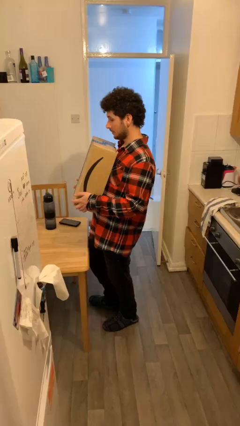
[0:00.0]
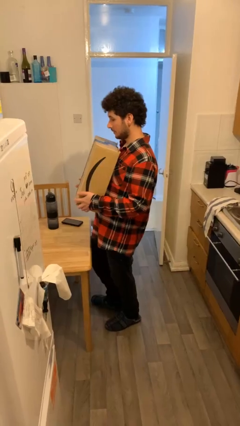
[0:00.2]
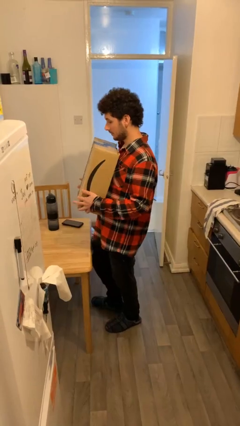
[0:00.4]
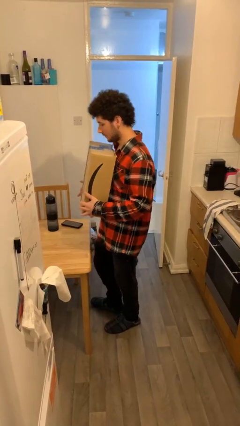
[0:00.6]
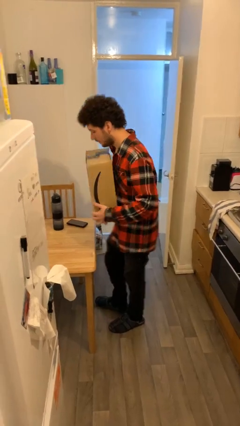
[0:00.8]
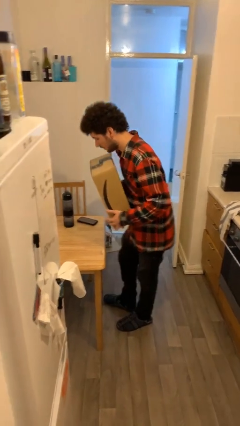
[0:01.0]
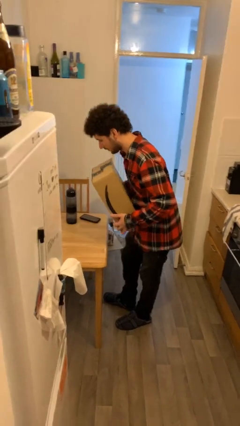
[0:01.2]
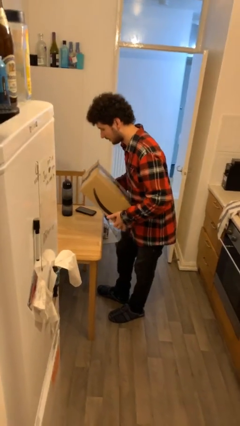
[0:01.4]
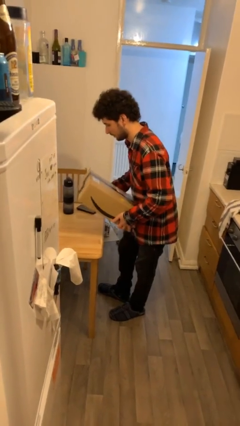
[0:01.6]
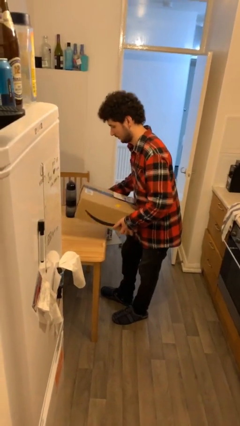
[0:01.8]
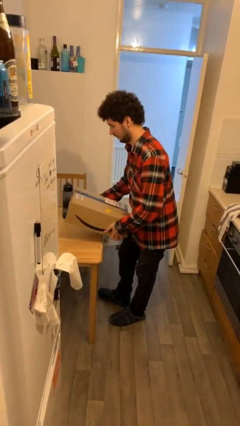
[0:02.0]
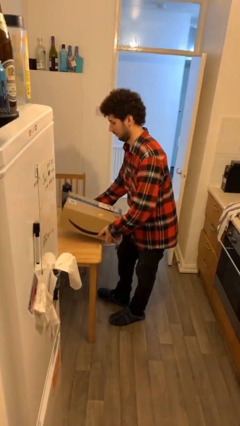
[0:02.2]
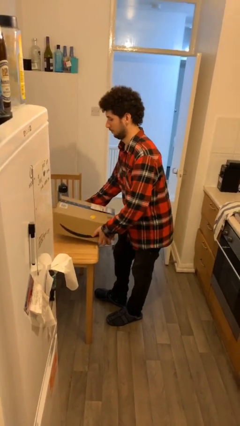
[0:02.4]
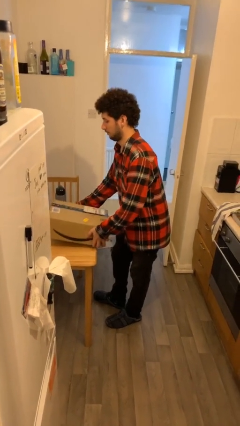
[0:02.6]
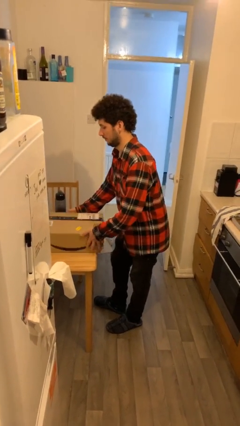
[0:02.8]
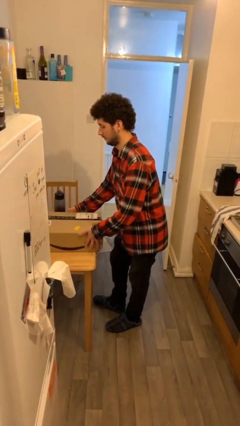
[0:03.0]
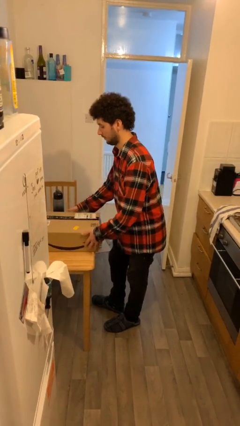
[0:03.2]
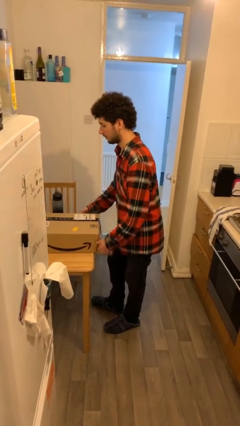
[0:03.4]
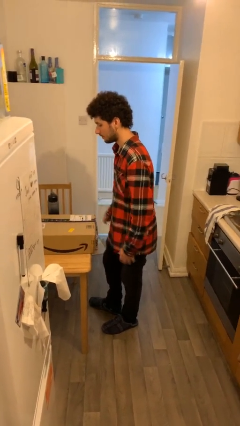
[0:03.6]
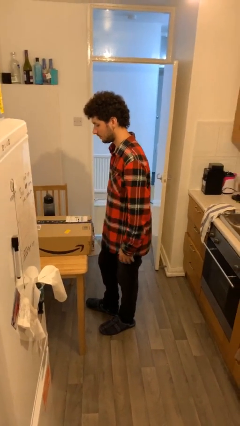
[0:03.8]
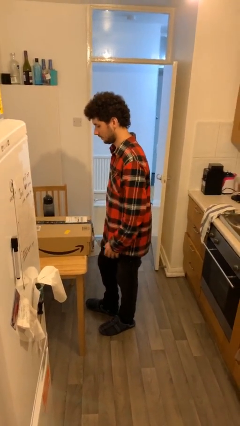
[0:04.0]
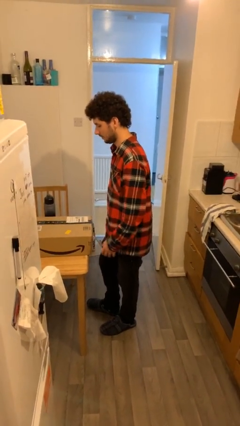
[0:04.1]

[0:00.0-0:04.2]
person puts down object on table

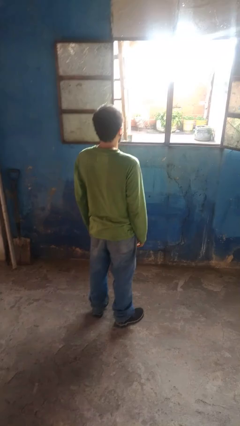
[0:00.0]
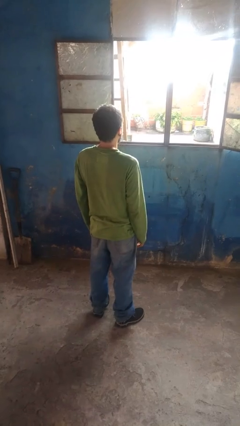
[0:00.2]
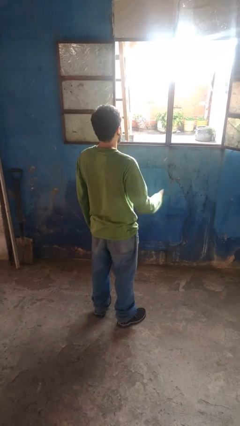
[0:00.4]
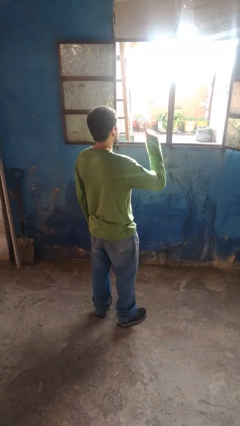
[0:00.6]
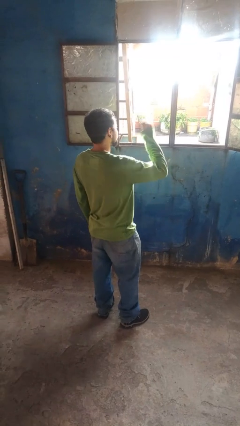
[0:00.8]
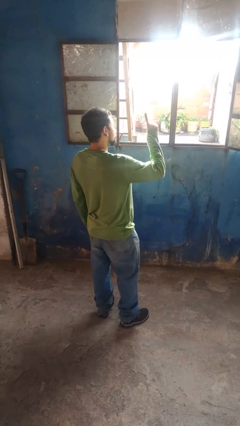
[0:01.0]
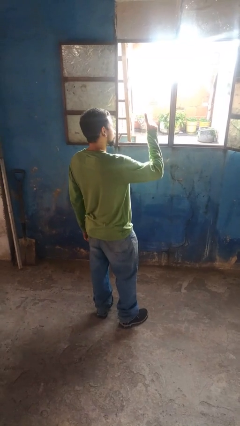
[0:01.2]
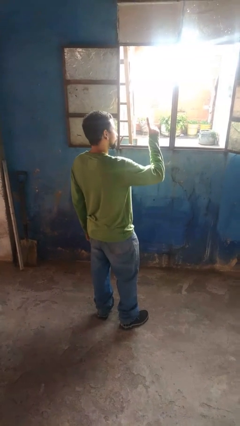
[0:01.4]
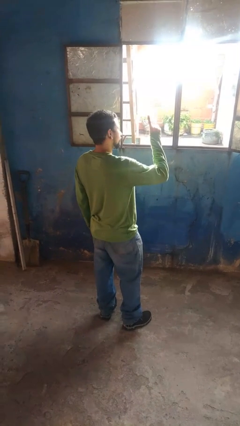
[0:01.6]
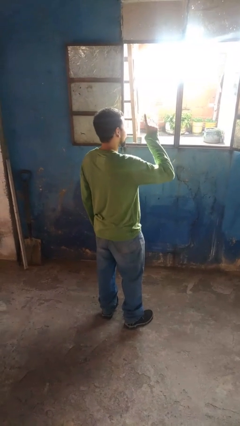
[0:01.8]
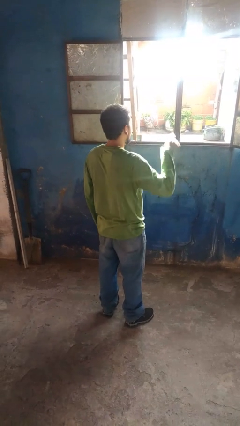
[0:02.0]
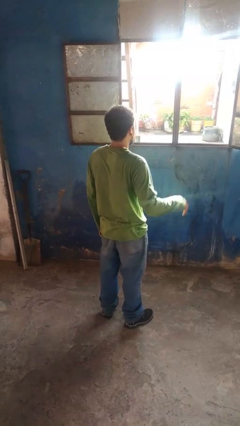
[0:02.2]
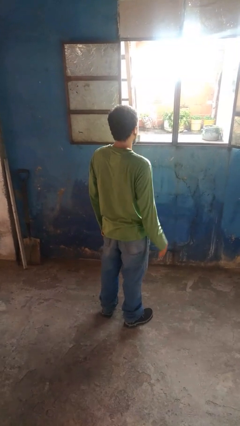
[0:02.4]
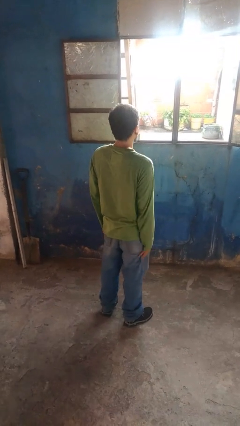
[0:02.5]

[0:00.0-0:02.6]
person gestures number one

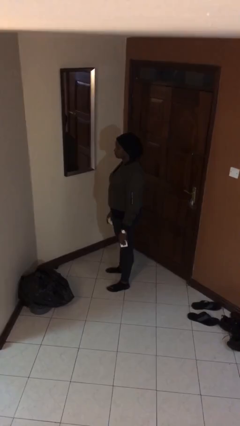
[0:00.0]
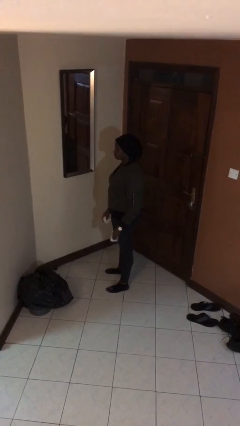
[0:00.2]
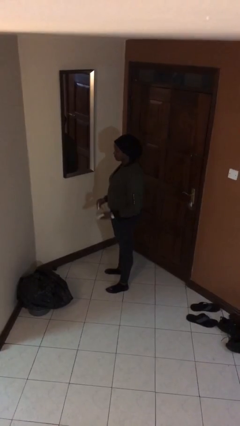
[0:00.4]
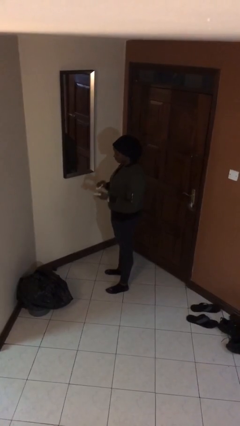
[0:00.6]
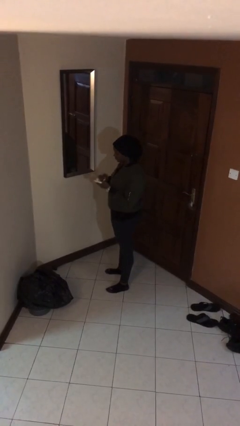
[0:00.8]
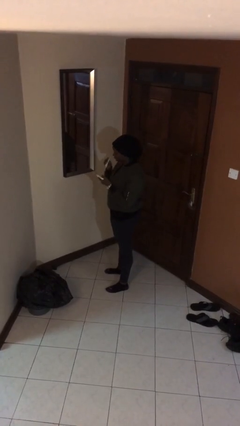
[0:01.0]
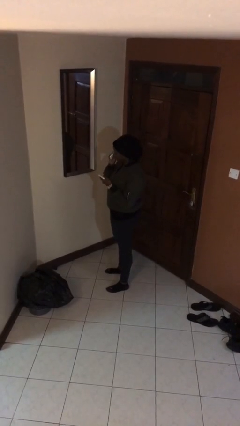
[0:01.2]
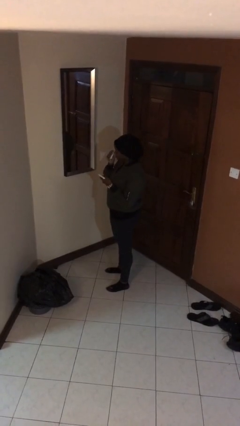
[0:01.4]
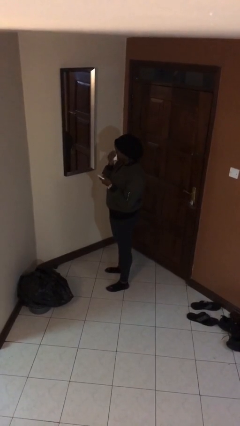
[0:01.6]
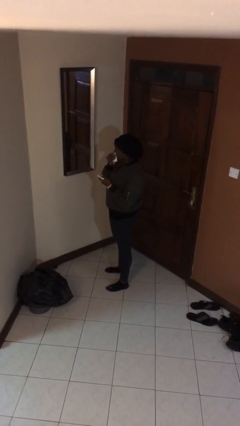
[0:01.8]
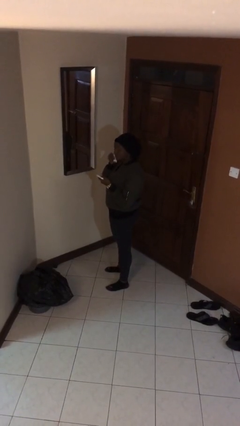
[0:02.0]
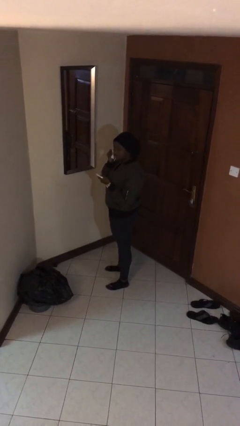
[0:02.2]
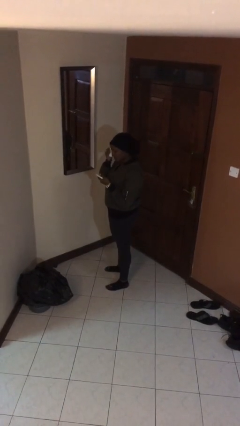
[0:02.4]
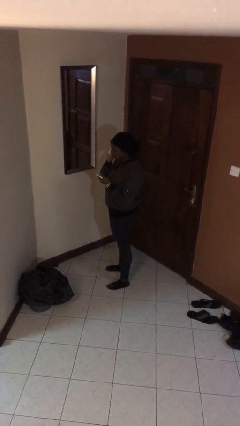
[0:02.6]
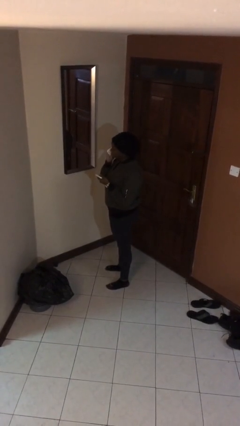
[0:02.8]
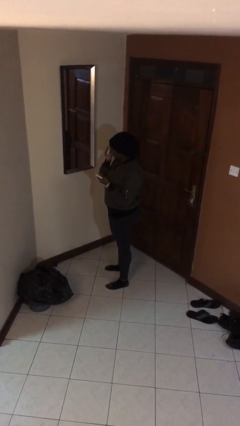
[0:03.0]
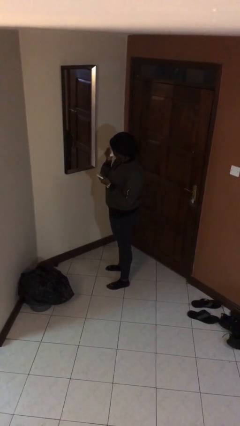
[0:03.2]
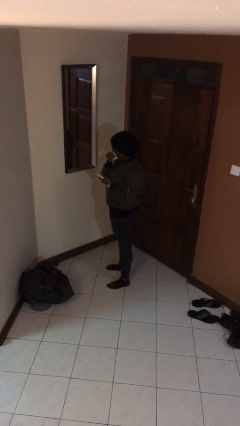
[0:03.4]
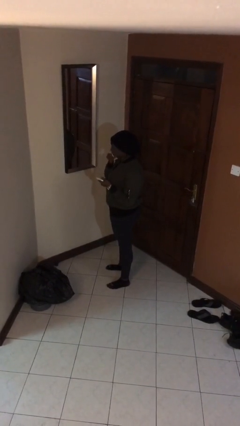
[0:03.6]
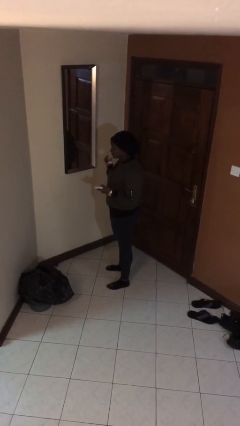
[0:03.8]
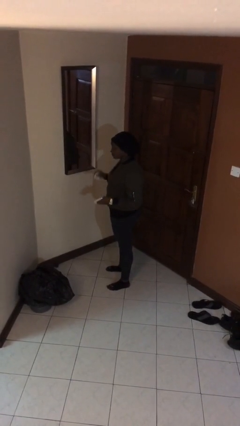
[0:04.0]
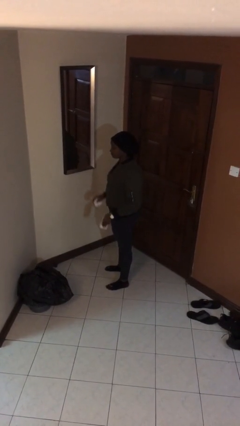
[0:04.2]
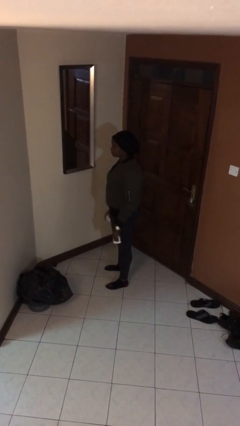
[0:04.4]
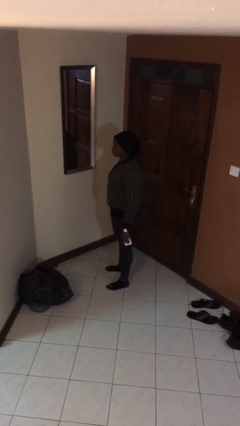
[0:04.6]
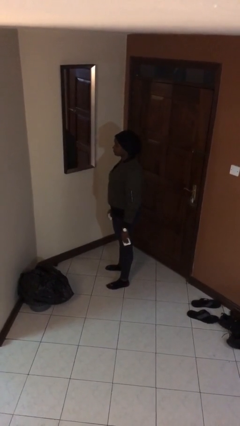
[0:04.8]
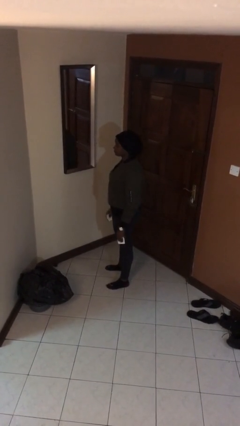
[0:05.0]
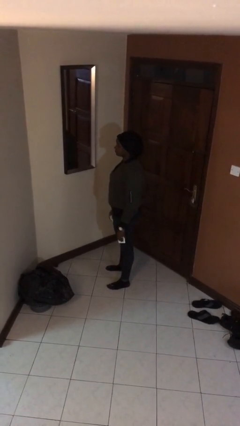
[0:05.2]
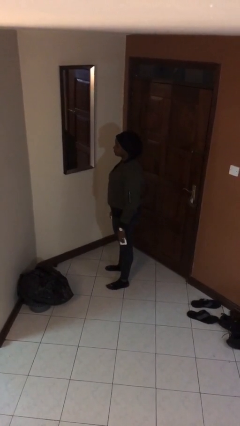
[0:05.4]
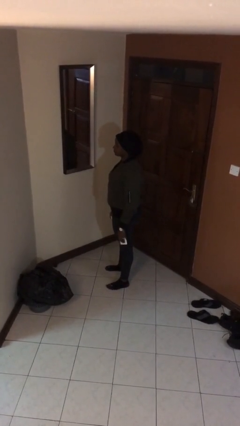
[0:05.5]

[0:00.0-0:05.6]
person applies foundation makeup

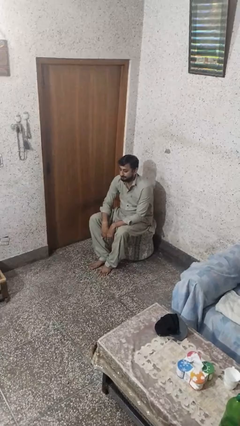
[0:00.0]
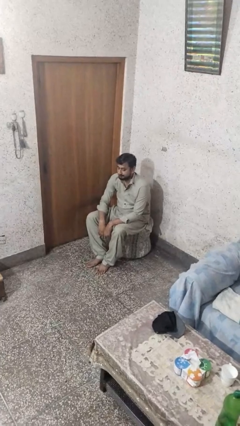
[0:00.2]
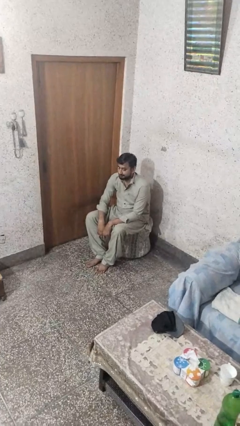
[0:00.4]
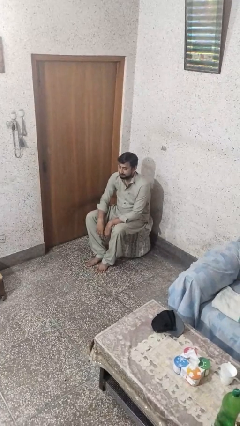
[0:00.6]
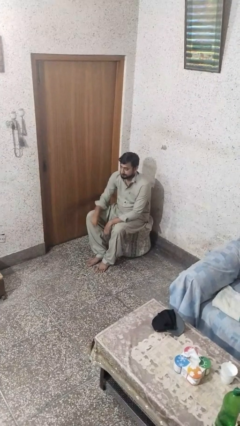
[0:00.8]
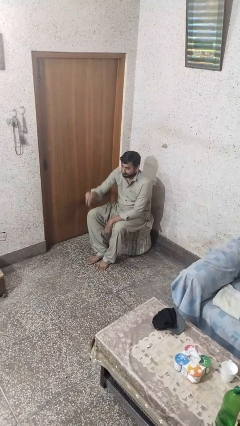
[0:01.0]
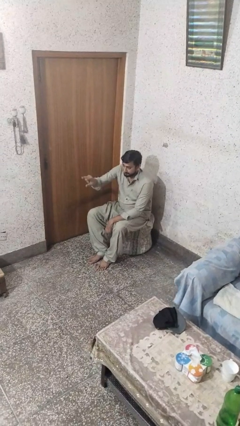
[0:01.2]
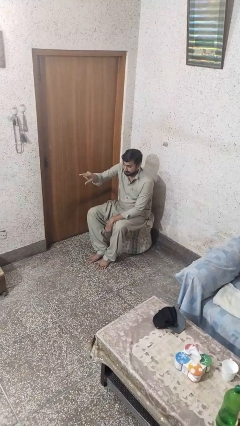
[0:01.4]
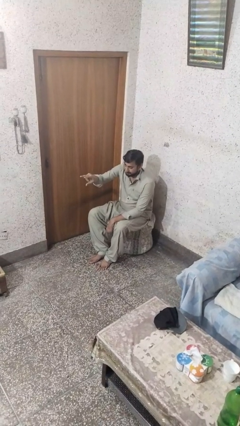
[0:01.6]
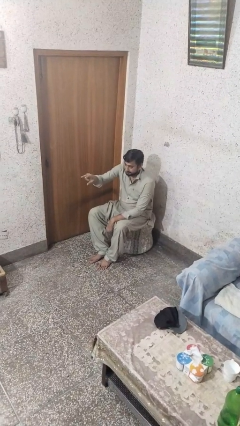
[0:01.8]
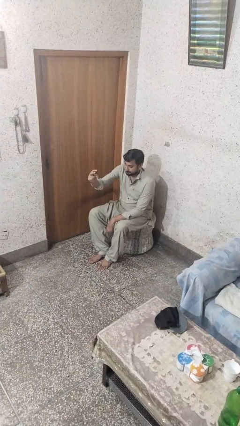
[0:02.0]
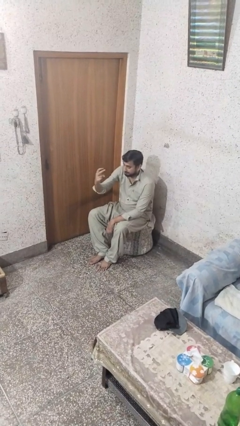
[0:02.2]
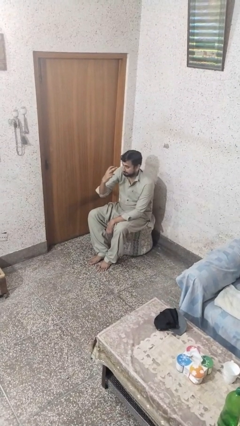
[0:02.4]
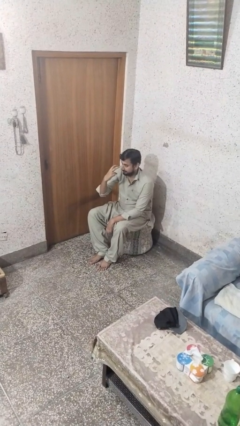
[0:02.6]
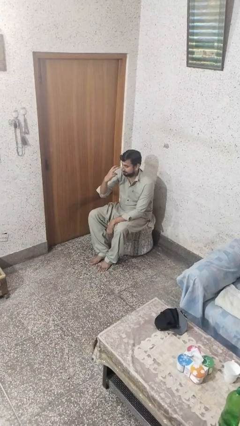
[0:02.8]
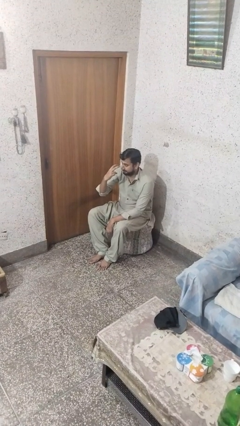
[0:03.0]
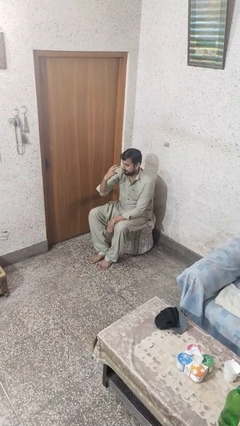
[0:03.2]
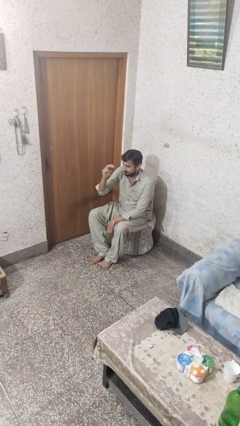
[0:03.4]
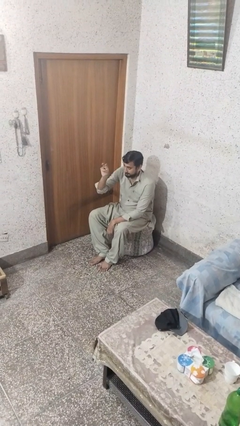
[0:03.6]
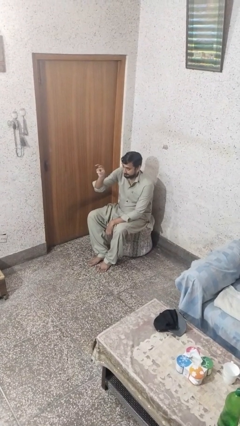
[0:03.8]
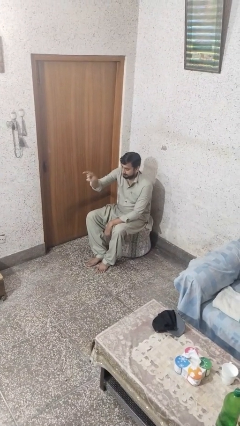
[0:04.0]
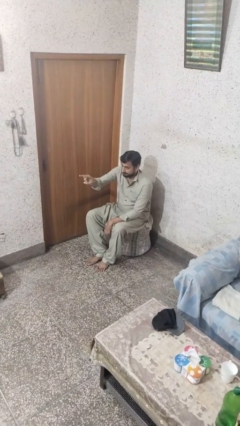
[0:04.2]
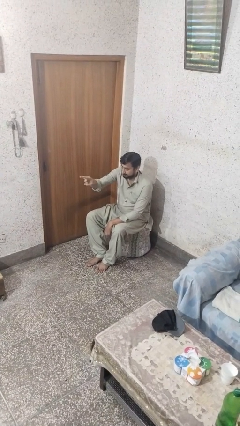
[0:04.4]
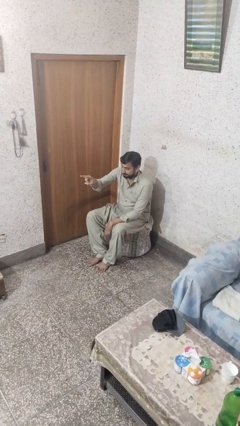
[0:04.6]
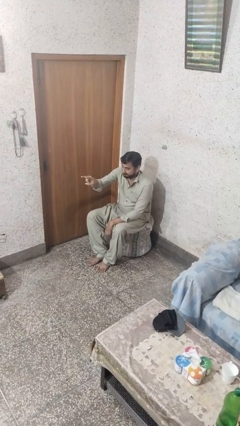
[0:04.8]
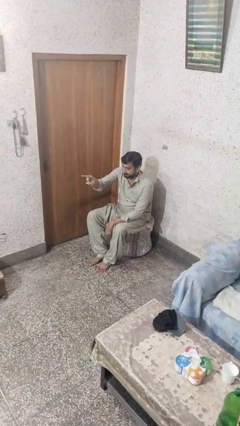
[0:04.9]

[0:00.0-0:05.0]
person gestures watch closely
